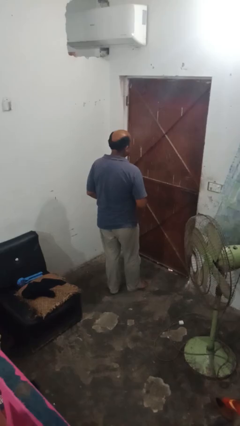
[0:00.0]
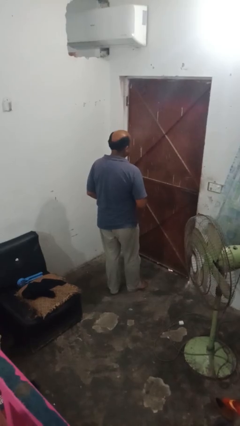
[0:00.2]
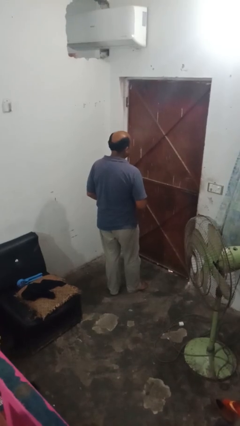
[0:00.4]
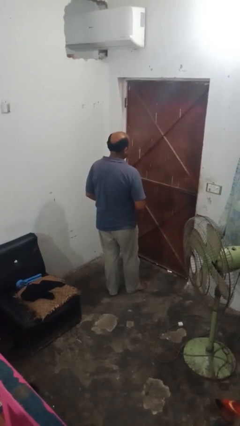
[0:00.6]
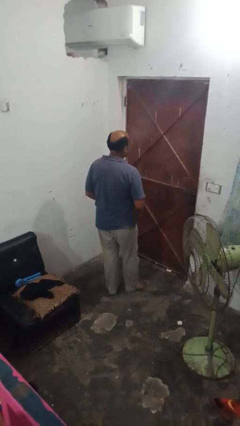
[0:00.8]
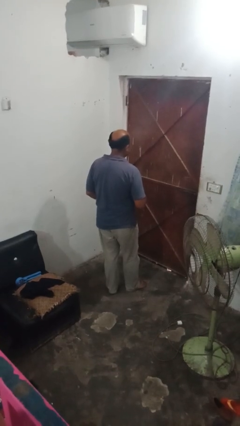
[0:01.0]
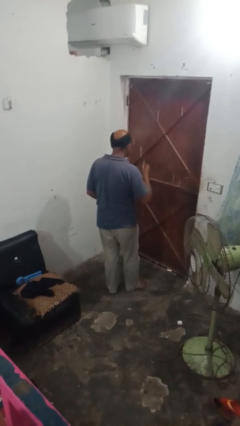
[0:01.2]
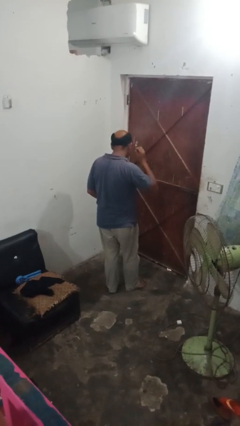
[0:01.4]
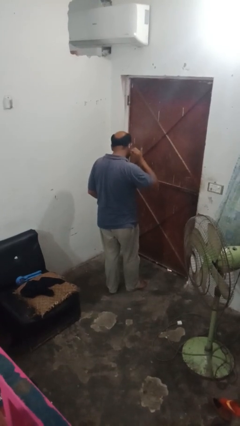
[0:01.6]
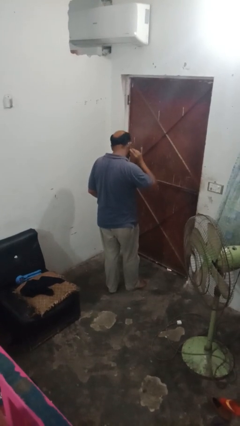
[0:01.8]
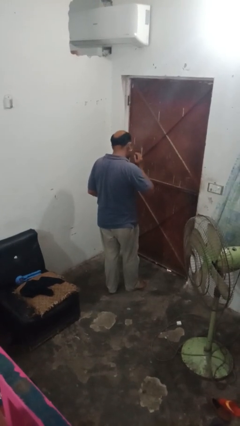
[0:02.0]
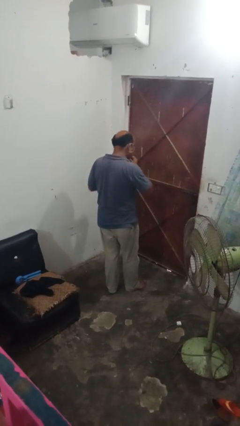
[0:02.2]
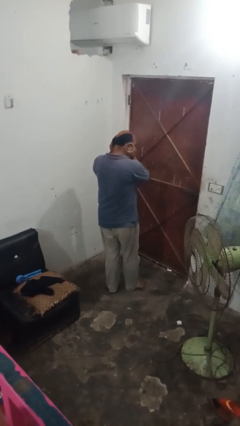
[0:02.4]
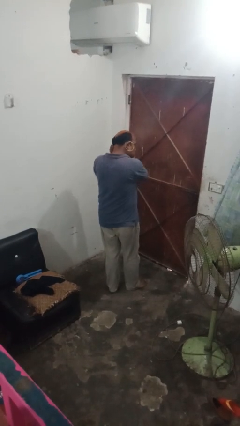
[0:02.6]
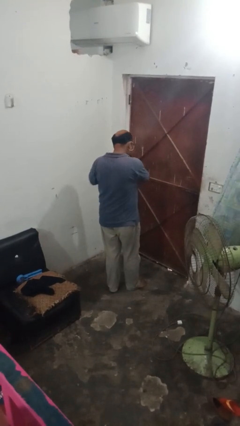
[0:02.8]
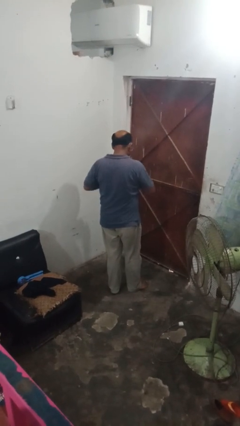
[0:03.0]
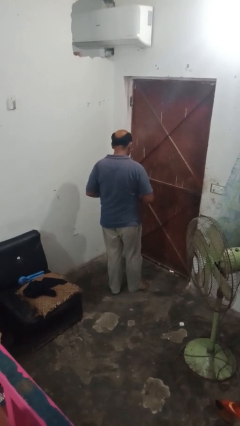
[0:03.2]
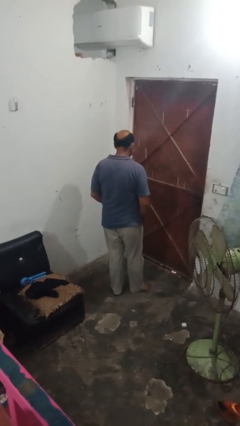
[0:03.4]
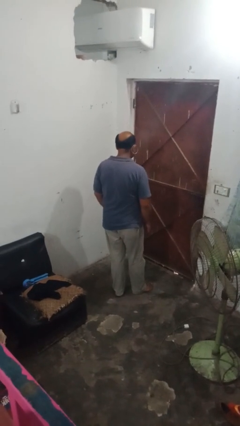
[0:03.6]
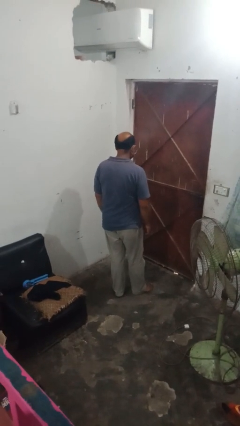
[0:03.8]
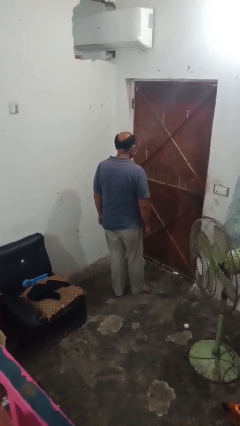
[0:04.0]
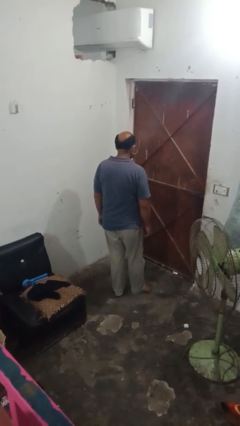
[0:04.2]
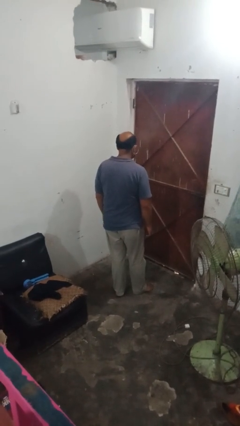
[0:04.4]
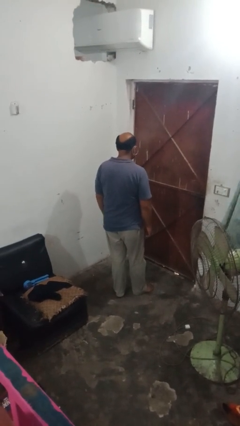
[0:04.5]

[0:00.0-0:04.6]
person puts on earrings

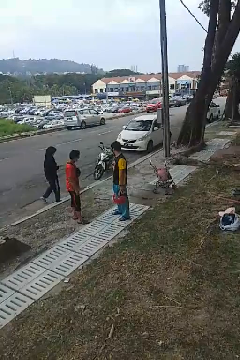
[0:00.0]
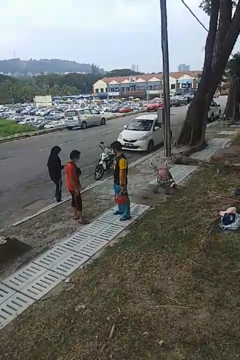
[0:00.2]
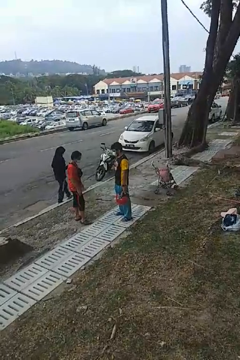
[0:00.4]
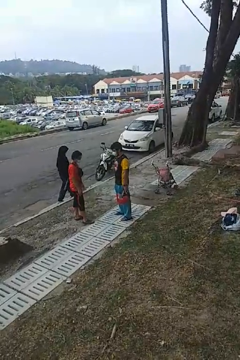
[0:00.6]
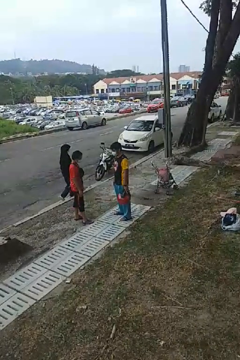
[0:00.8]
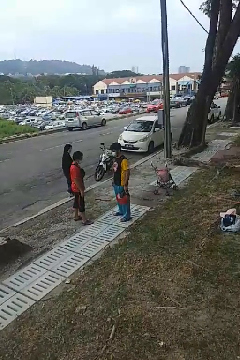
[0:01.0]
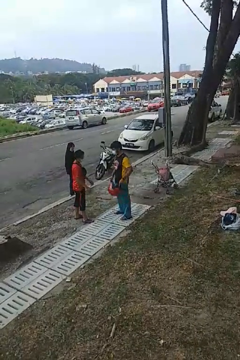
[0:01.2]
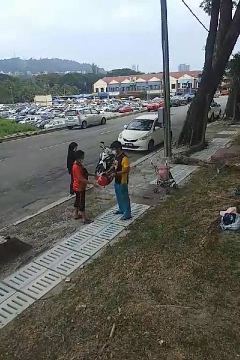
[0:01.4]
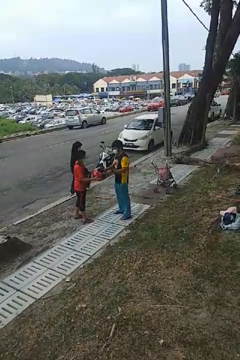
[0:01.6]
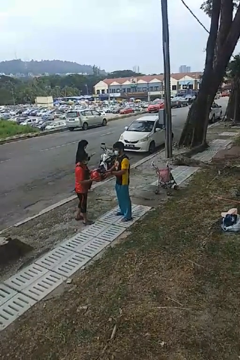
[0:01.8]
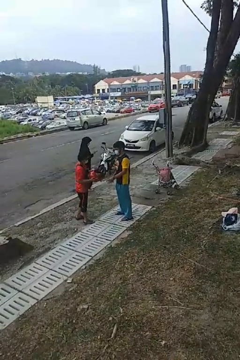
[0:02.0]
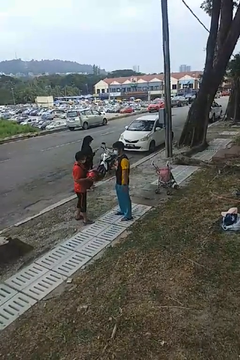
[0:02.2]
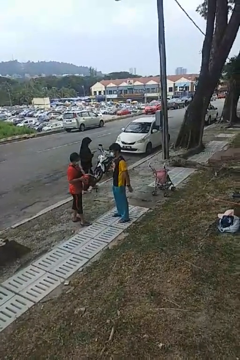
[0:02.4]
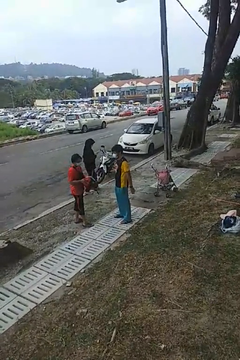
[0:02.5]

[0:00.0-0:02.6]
person transfers object to person

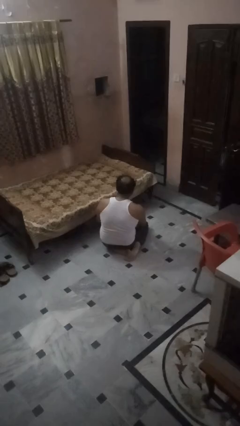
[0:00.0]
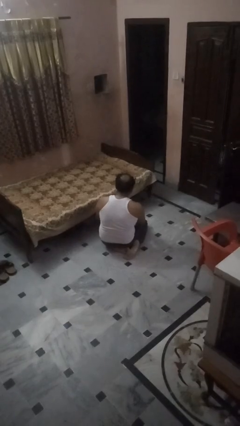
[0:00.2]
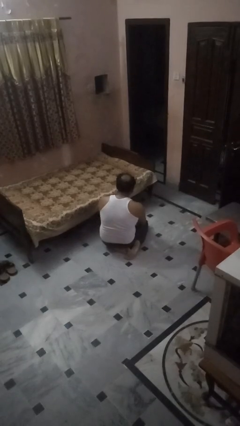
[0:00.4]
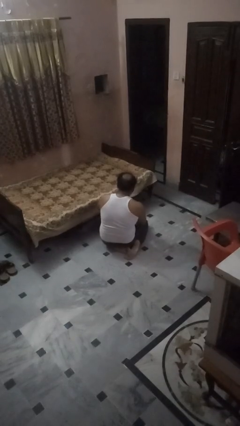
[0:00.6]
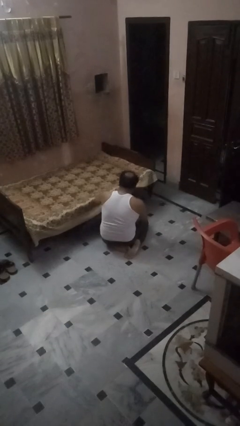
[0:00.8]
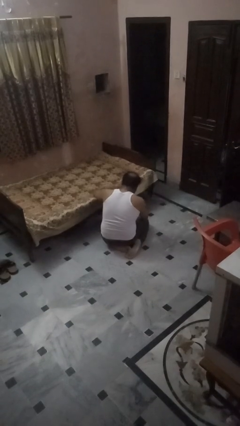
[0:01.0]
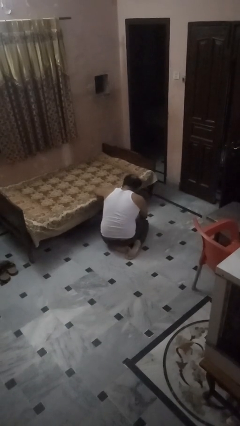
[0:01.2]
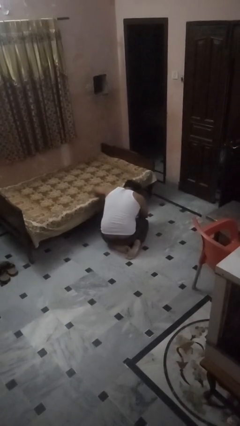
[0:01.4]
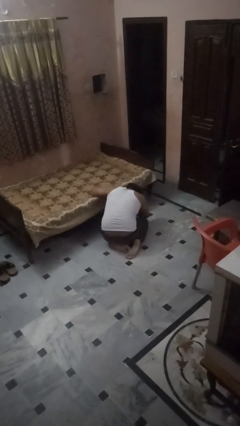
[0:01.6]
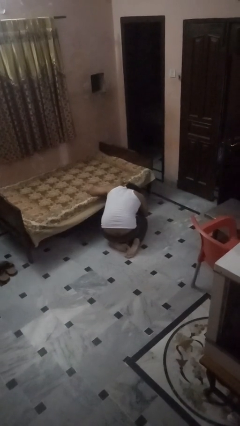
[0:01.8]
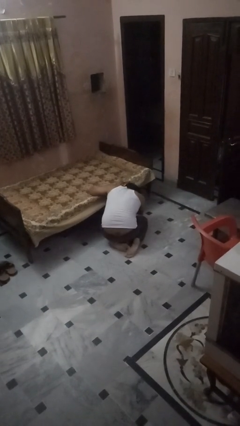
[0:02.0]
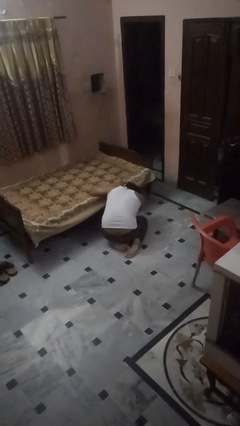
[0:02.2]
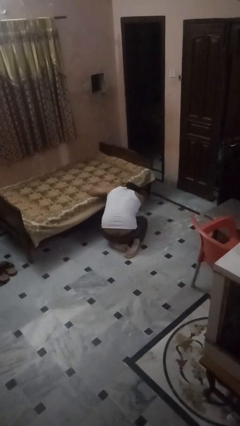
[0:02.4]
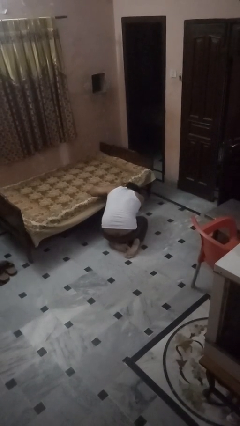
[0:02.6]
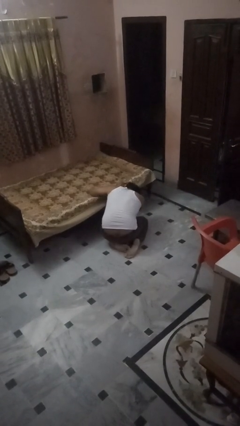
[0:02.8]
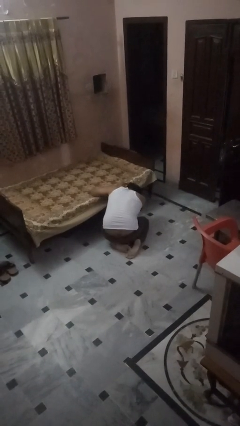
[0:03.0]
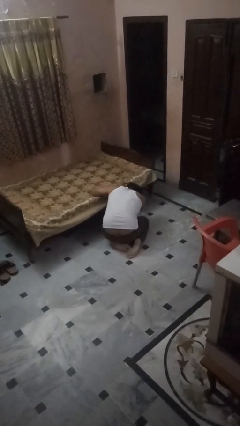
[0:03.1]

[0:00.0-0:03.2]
person searches under bed

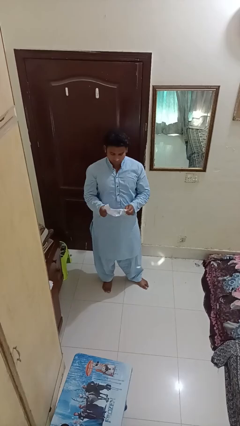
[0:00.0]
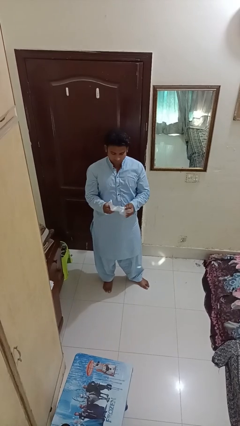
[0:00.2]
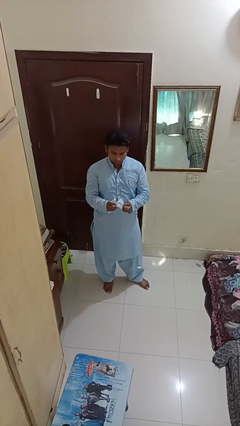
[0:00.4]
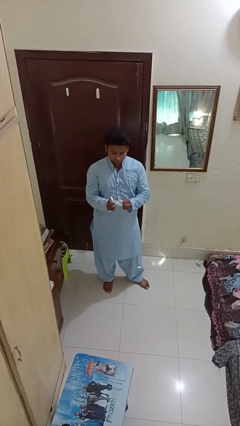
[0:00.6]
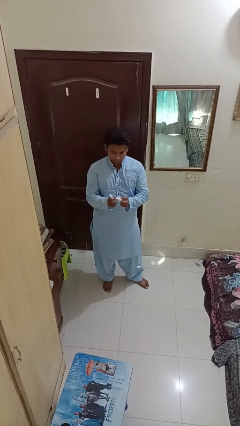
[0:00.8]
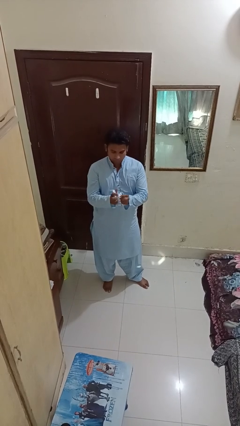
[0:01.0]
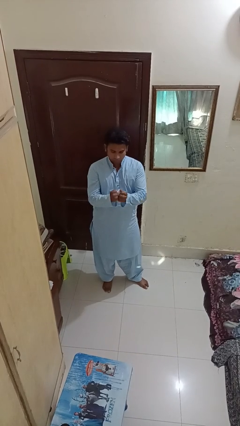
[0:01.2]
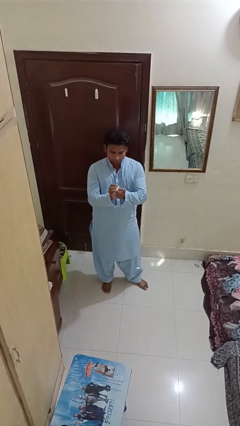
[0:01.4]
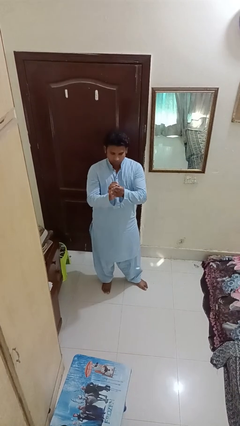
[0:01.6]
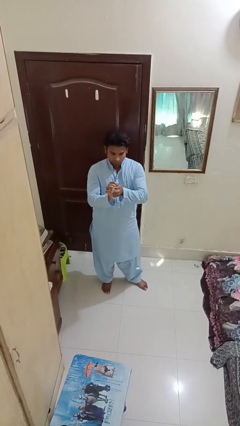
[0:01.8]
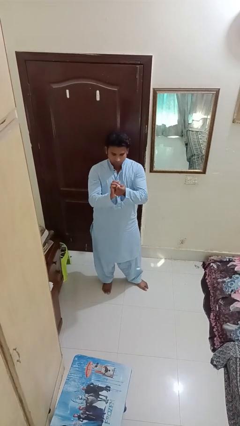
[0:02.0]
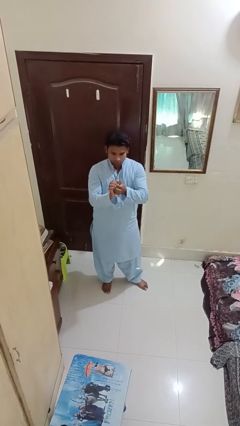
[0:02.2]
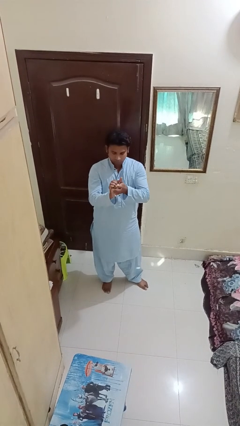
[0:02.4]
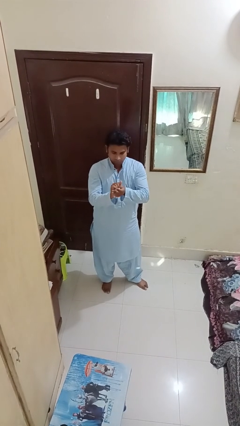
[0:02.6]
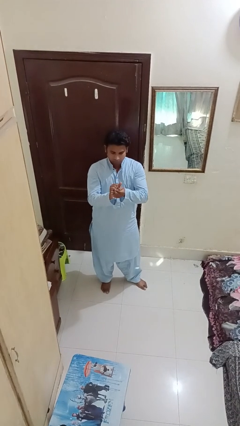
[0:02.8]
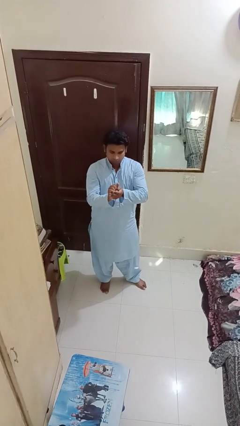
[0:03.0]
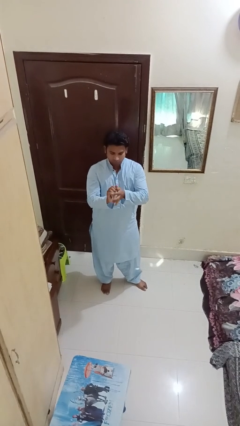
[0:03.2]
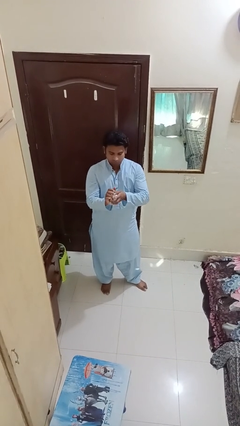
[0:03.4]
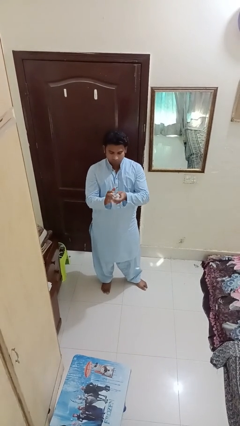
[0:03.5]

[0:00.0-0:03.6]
person crumples paper

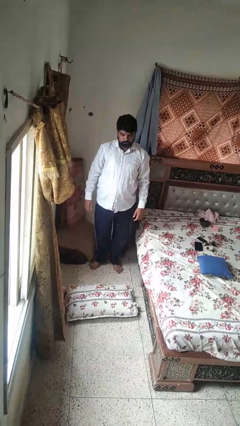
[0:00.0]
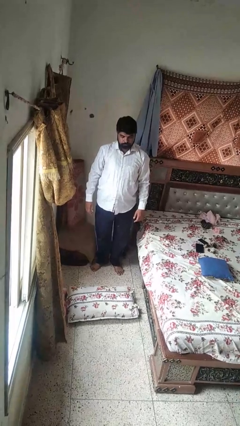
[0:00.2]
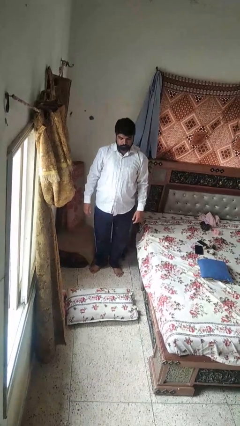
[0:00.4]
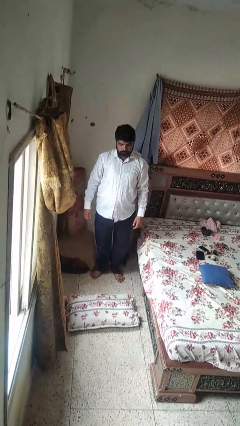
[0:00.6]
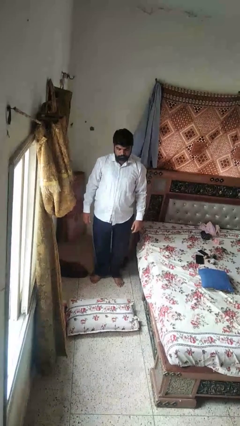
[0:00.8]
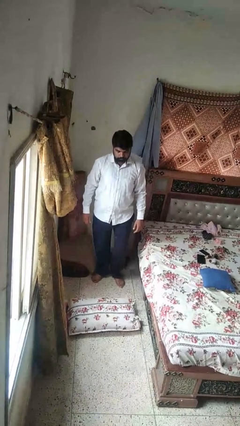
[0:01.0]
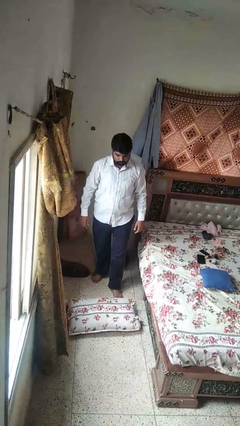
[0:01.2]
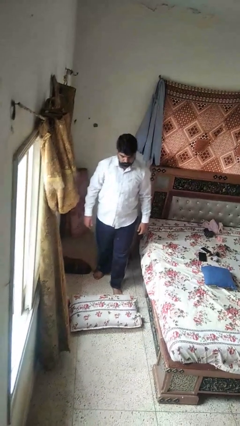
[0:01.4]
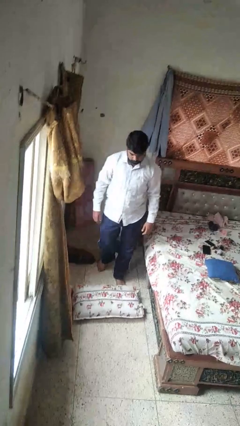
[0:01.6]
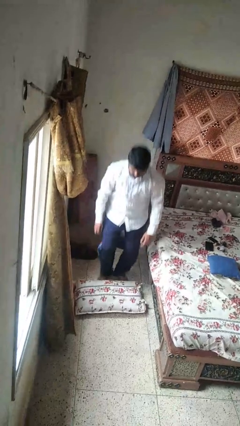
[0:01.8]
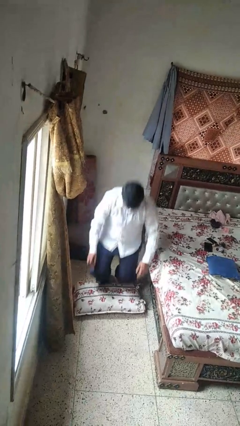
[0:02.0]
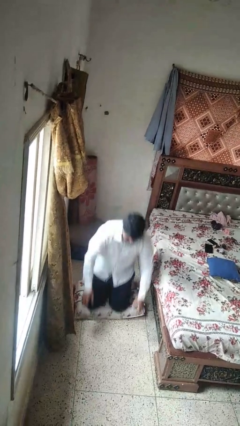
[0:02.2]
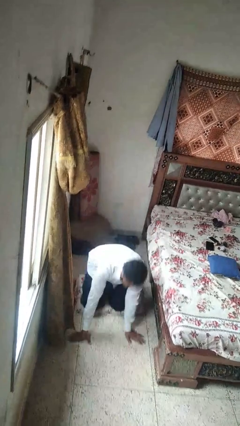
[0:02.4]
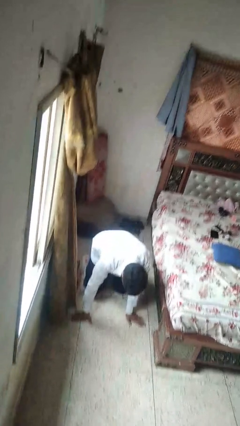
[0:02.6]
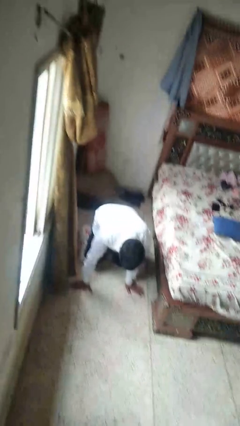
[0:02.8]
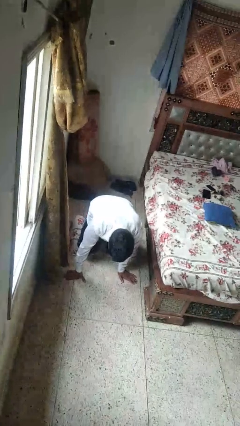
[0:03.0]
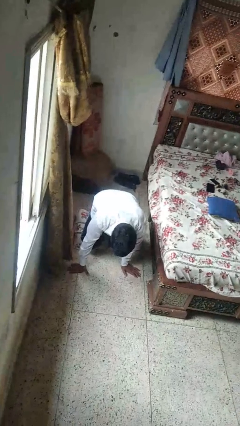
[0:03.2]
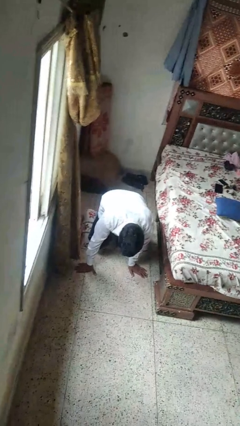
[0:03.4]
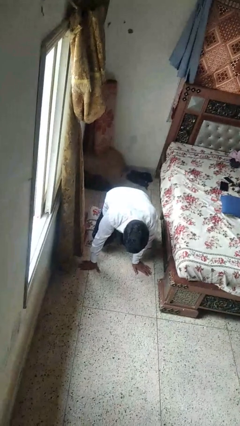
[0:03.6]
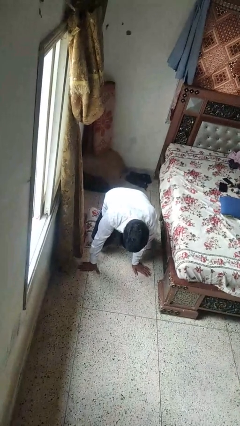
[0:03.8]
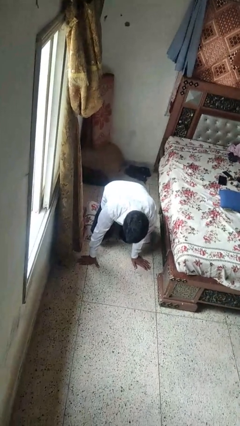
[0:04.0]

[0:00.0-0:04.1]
person trips on object on floor

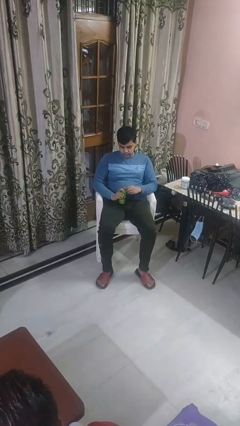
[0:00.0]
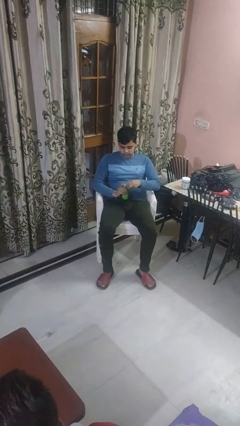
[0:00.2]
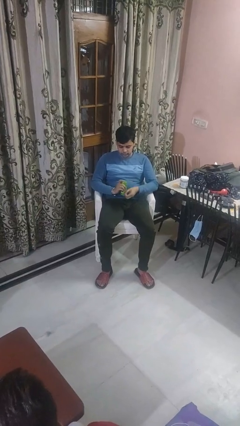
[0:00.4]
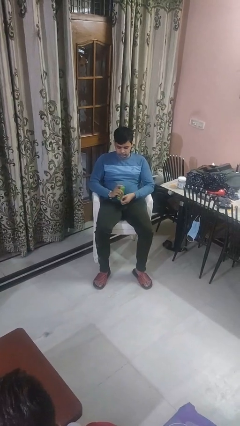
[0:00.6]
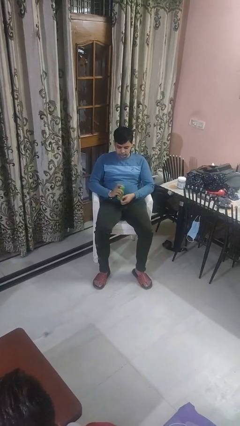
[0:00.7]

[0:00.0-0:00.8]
person opens beverage can
